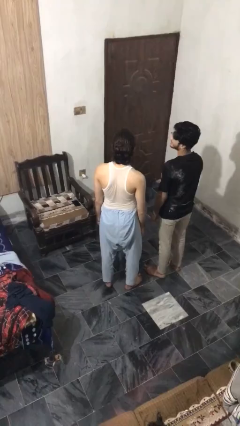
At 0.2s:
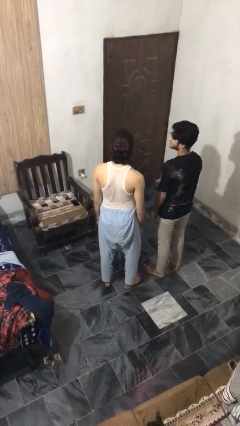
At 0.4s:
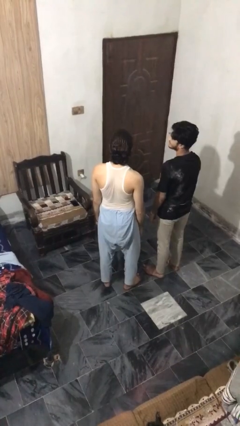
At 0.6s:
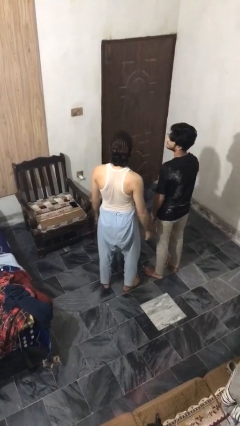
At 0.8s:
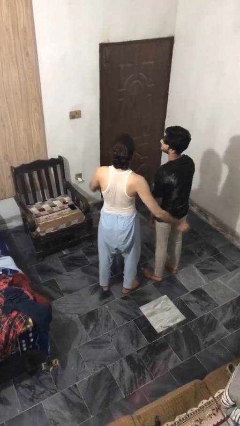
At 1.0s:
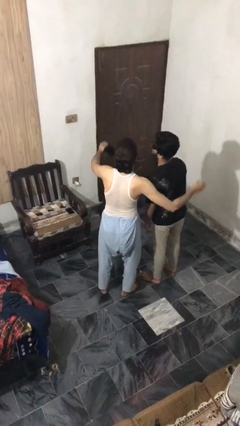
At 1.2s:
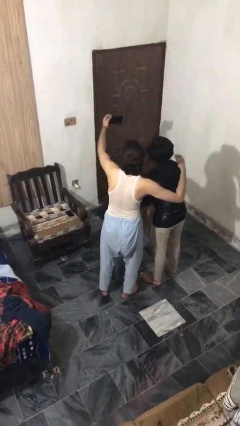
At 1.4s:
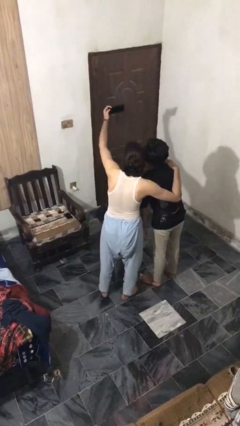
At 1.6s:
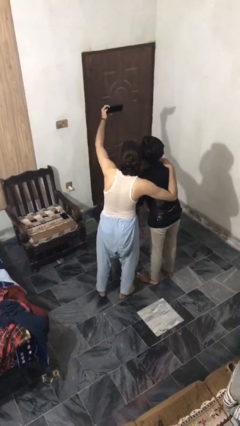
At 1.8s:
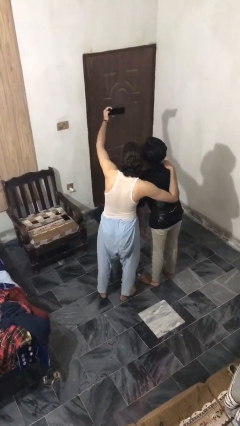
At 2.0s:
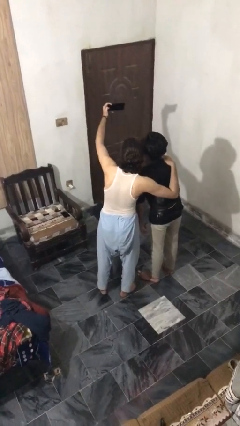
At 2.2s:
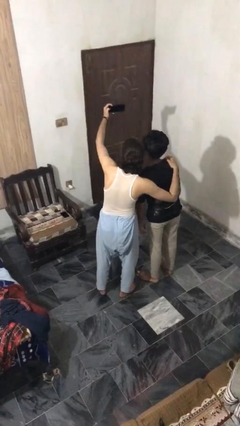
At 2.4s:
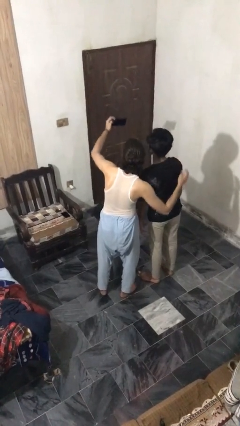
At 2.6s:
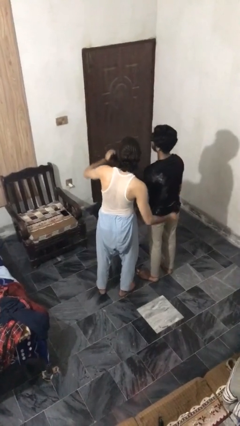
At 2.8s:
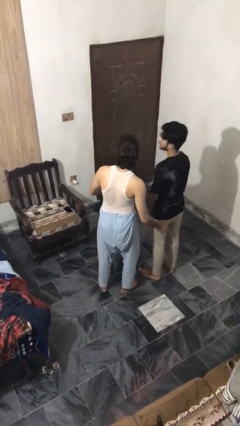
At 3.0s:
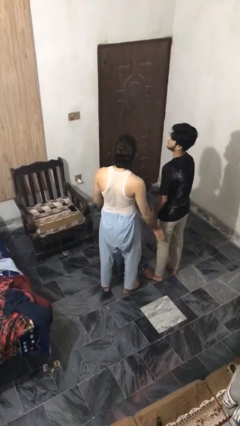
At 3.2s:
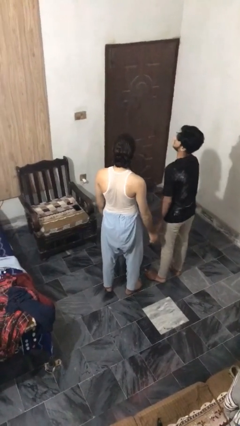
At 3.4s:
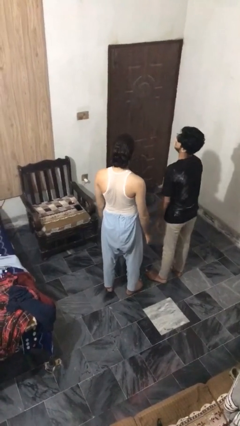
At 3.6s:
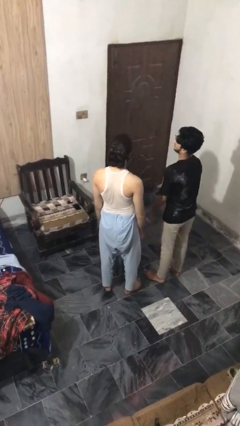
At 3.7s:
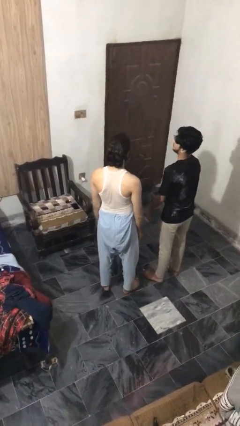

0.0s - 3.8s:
person takes selfie with person

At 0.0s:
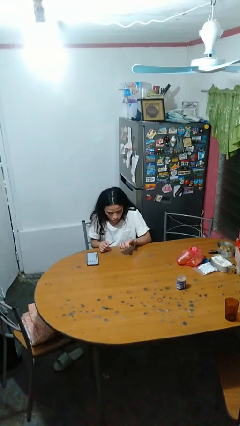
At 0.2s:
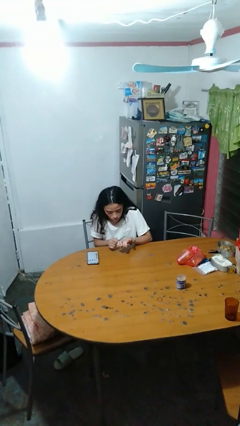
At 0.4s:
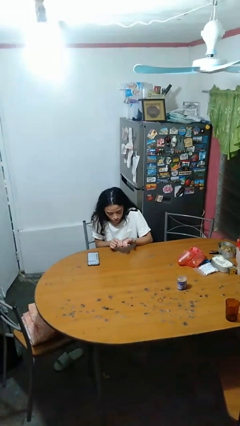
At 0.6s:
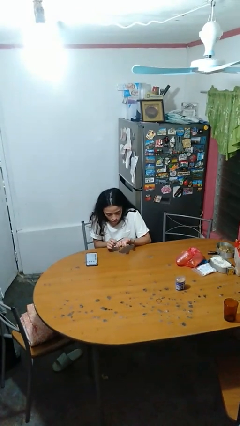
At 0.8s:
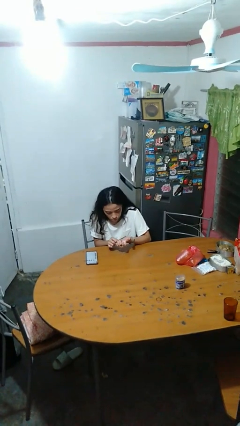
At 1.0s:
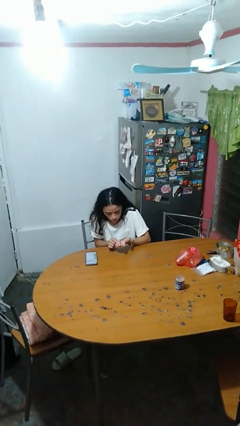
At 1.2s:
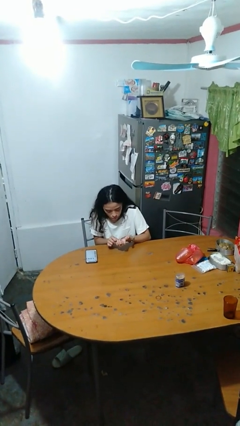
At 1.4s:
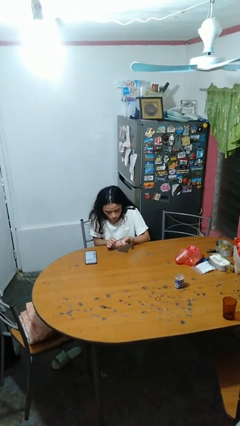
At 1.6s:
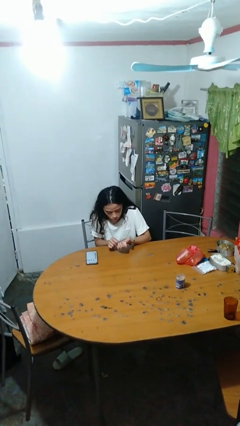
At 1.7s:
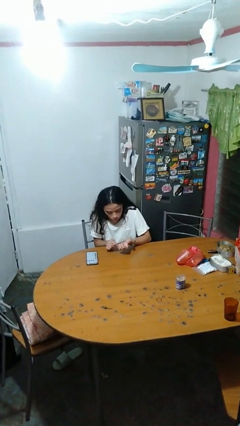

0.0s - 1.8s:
person files fingernails

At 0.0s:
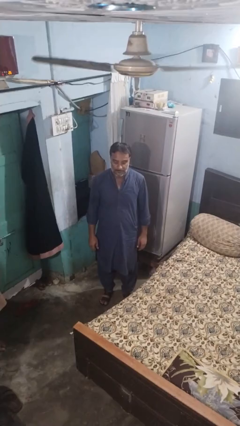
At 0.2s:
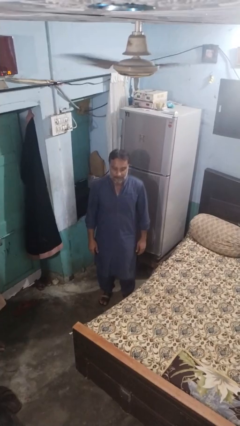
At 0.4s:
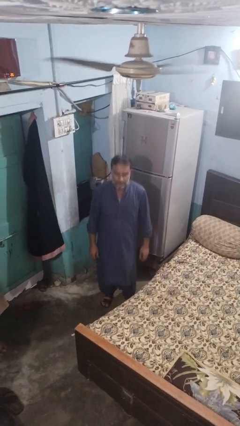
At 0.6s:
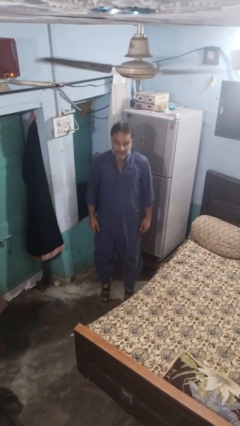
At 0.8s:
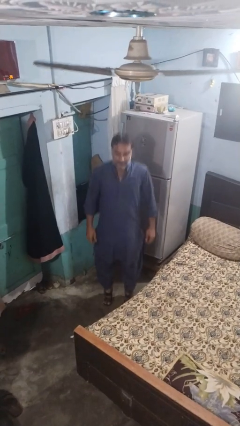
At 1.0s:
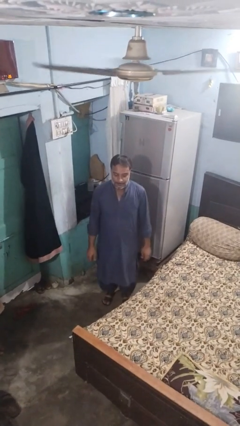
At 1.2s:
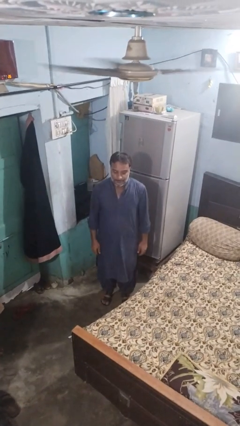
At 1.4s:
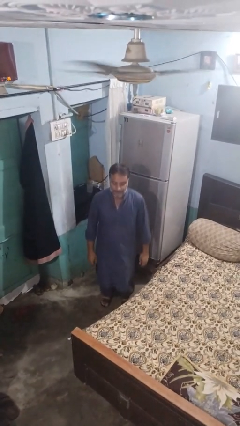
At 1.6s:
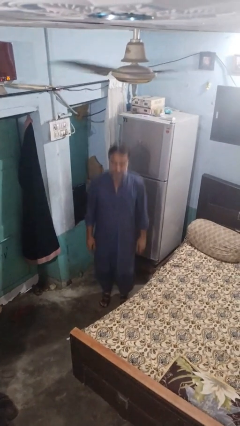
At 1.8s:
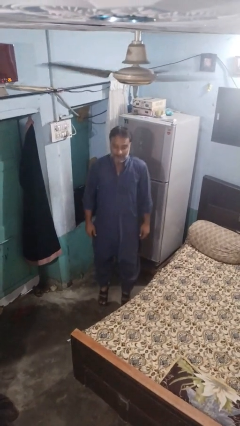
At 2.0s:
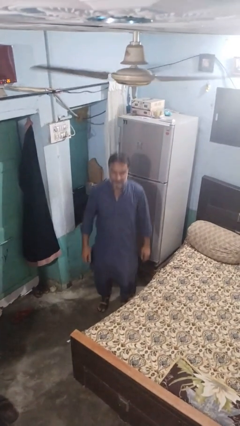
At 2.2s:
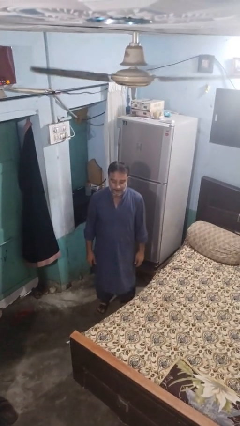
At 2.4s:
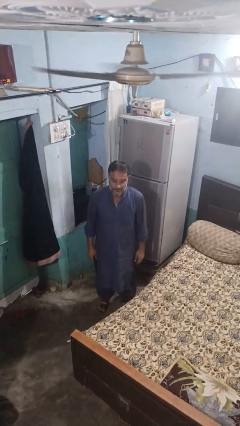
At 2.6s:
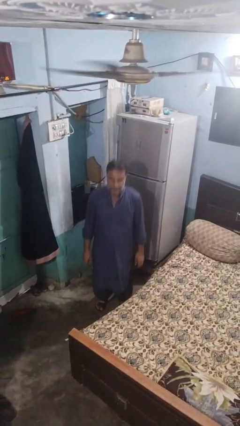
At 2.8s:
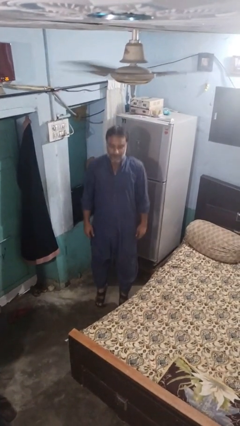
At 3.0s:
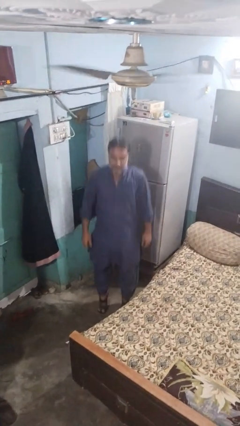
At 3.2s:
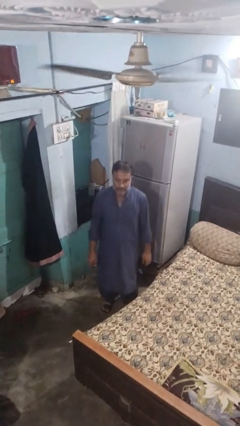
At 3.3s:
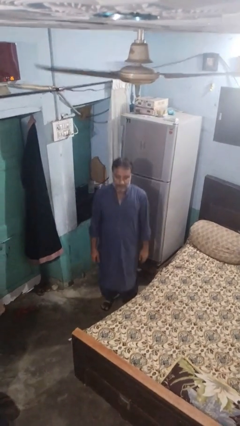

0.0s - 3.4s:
person jumps

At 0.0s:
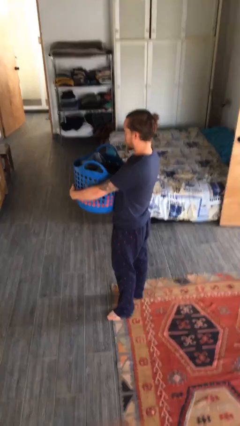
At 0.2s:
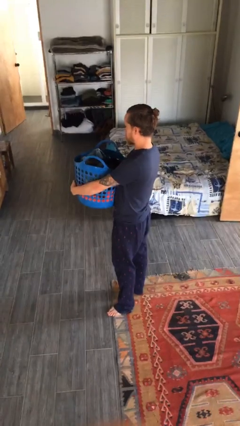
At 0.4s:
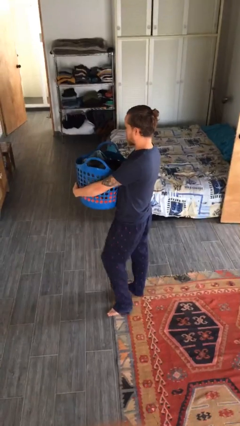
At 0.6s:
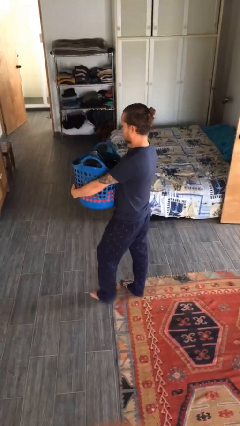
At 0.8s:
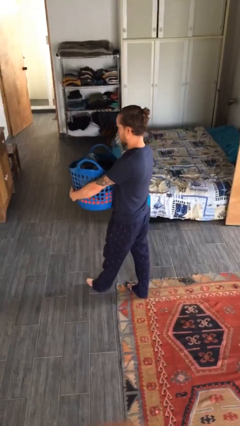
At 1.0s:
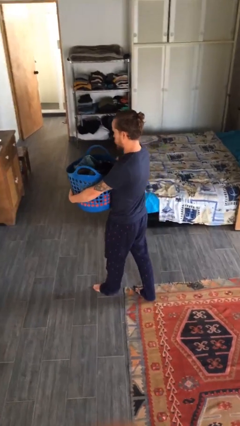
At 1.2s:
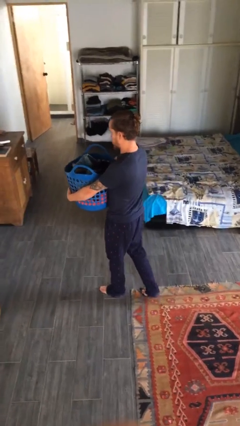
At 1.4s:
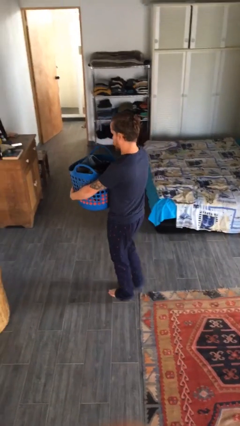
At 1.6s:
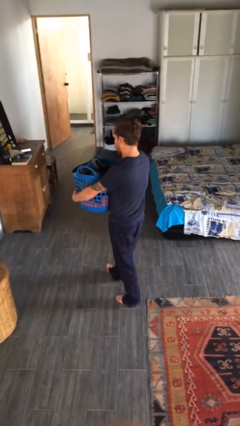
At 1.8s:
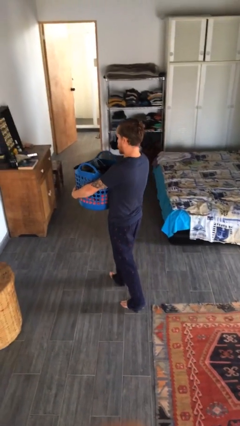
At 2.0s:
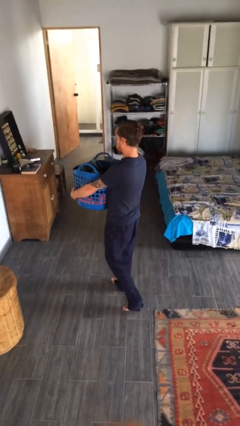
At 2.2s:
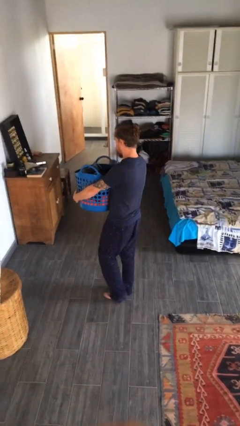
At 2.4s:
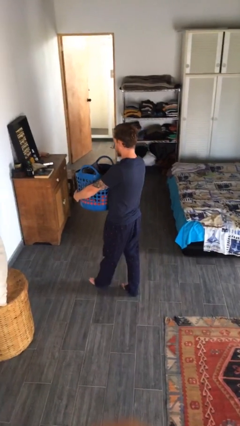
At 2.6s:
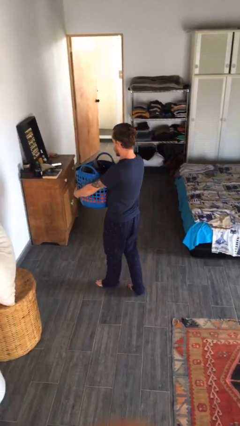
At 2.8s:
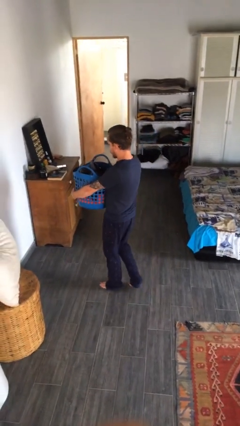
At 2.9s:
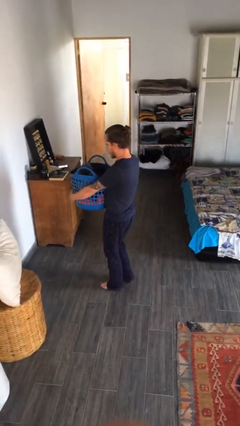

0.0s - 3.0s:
person carries laundry basket

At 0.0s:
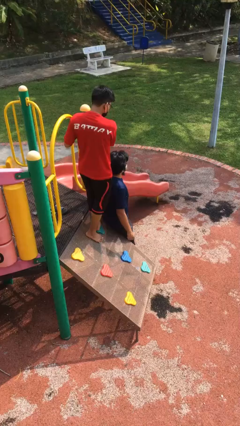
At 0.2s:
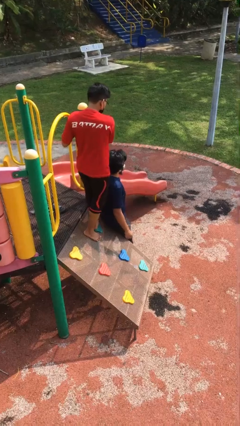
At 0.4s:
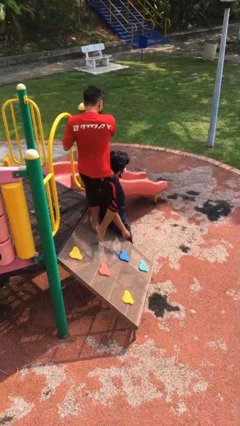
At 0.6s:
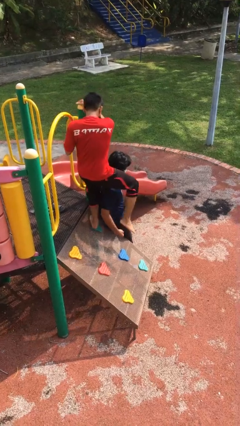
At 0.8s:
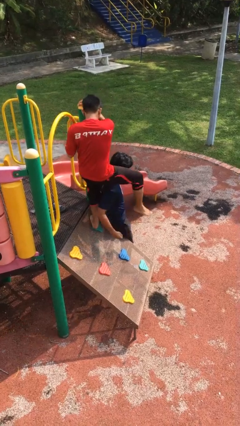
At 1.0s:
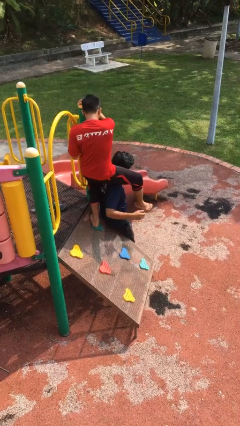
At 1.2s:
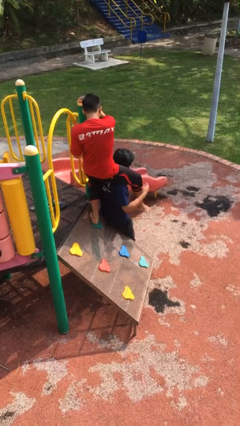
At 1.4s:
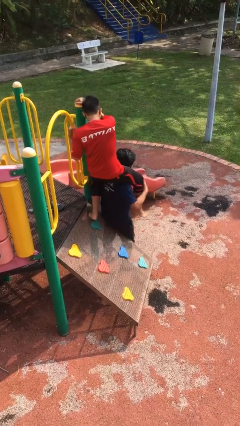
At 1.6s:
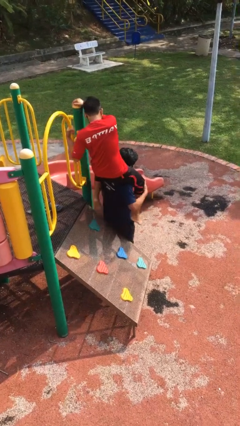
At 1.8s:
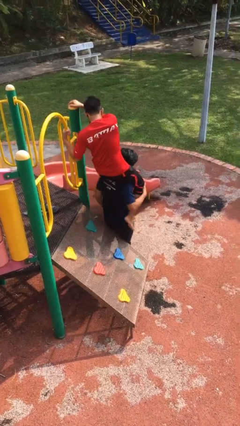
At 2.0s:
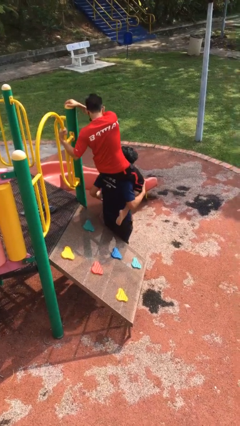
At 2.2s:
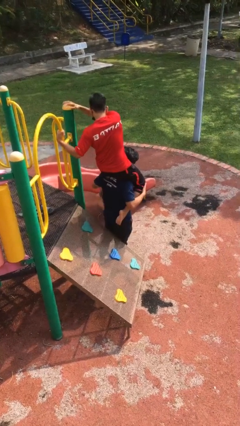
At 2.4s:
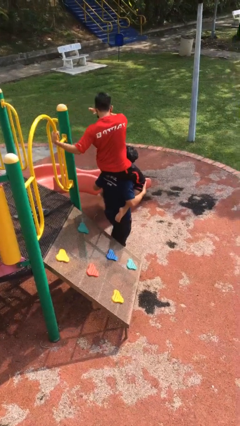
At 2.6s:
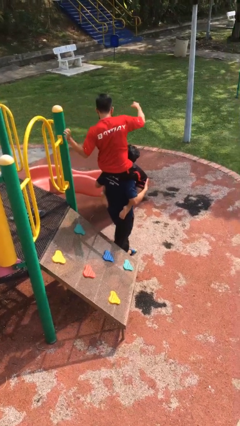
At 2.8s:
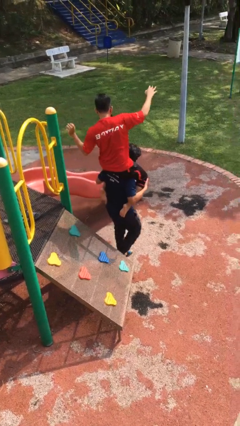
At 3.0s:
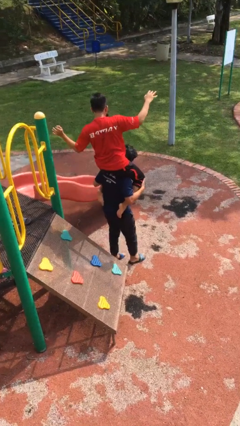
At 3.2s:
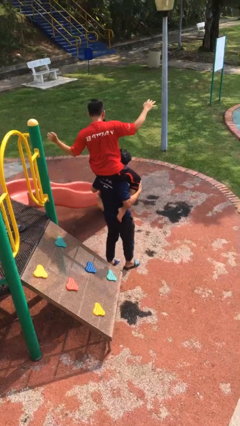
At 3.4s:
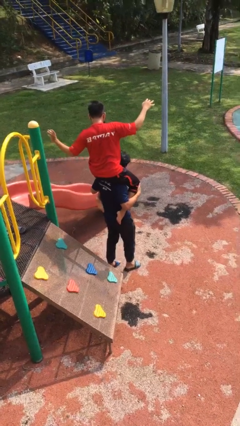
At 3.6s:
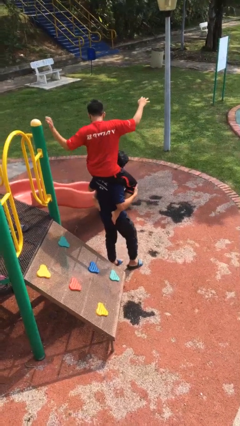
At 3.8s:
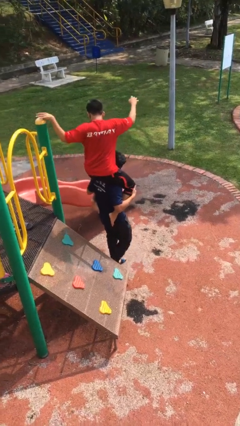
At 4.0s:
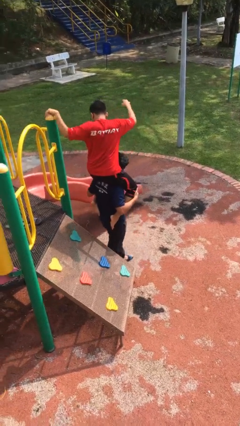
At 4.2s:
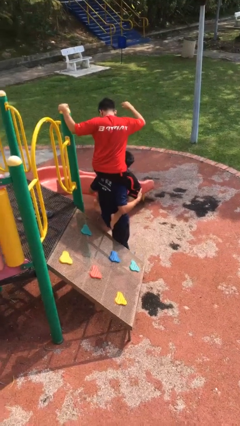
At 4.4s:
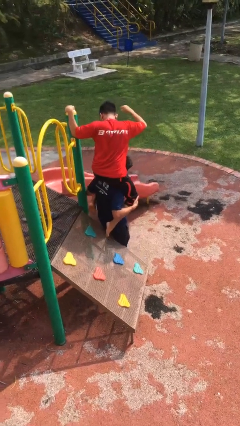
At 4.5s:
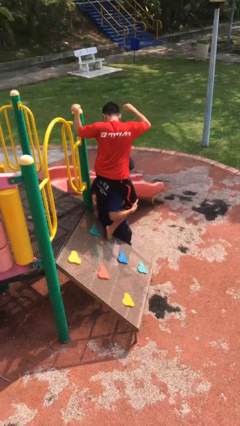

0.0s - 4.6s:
person carries person on shoulders

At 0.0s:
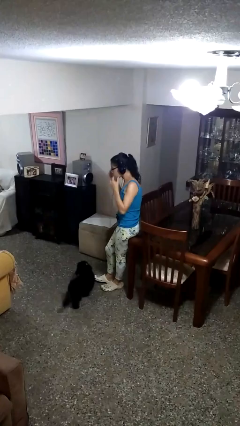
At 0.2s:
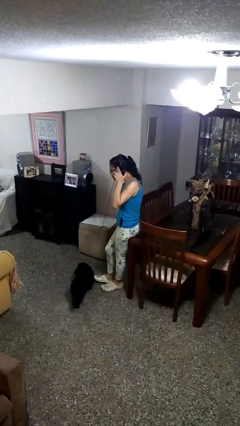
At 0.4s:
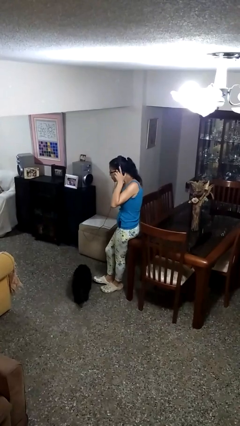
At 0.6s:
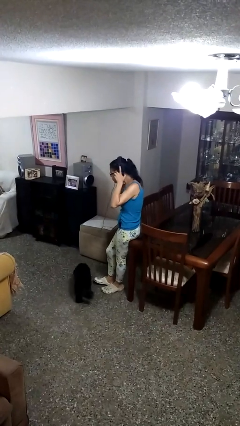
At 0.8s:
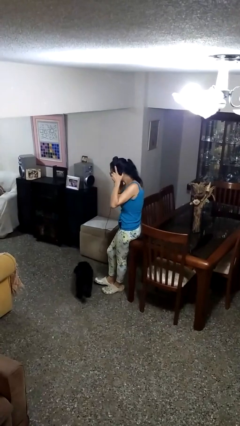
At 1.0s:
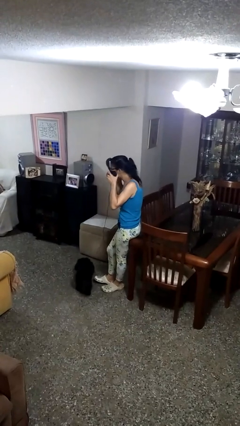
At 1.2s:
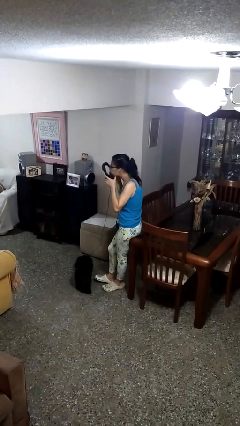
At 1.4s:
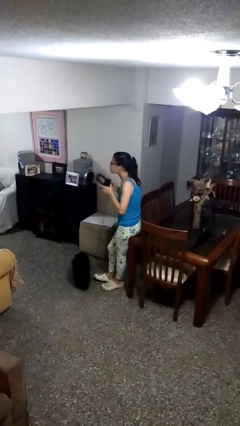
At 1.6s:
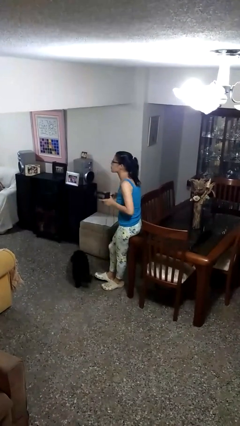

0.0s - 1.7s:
person takes off headphones
